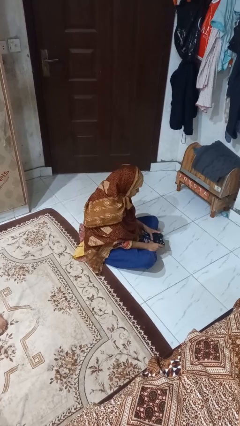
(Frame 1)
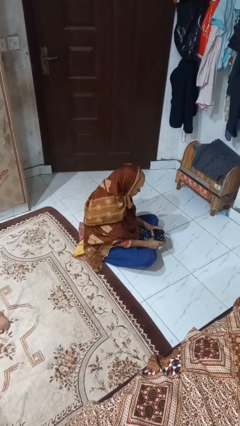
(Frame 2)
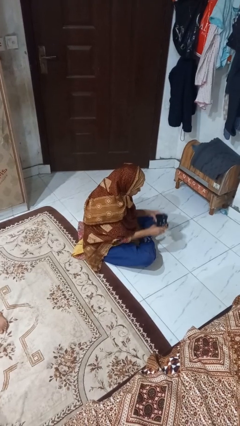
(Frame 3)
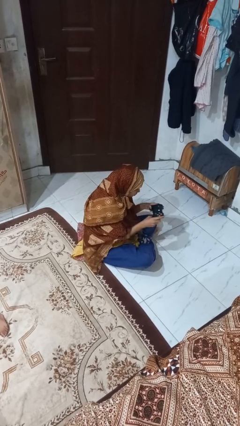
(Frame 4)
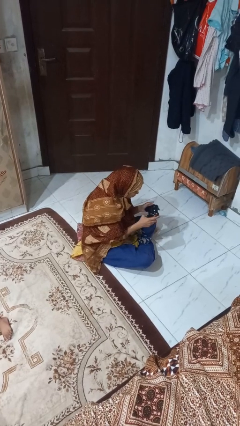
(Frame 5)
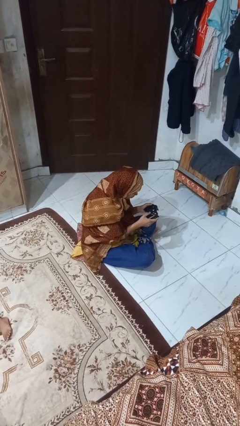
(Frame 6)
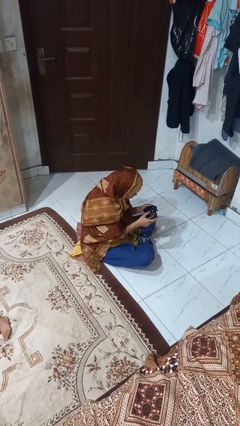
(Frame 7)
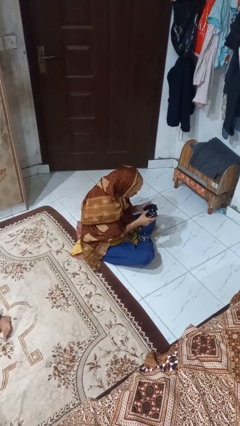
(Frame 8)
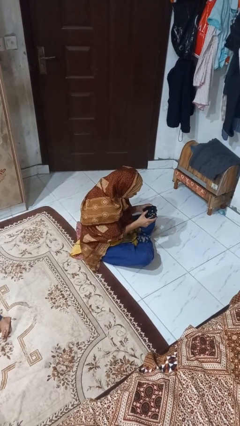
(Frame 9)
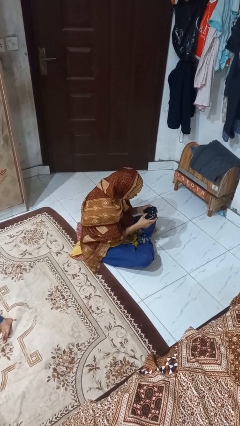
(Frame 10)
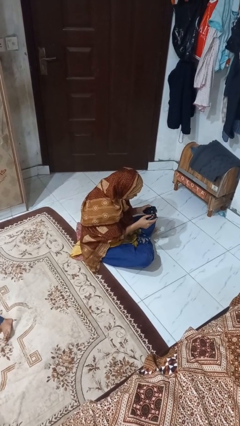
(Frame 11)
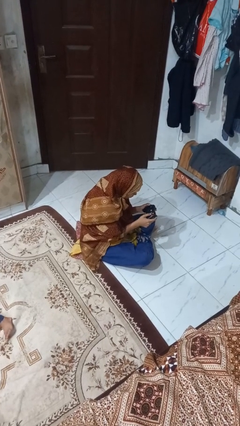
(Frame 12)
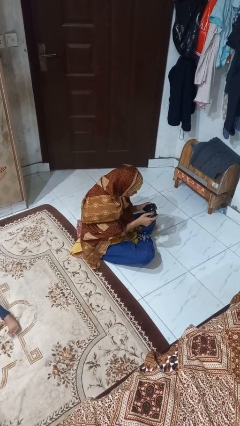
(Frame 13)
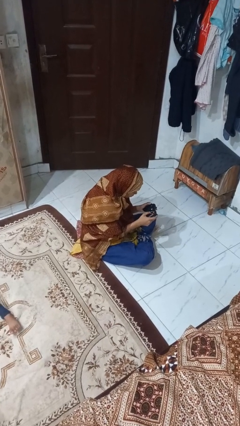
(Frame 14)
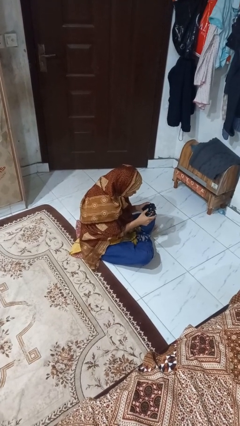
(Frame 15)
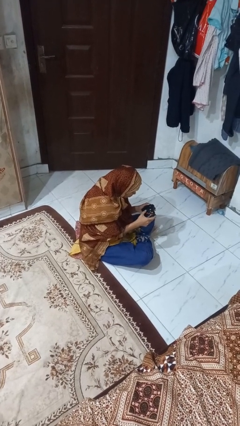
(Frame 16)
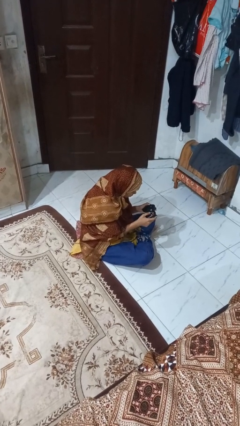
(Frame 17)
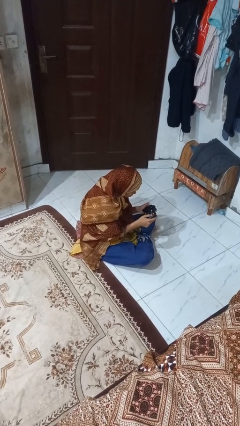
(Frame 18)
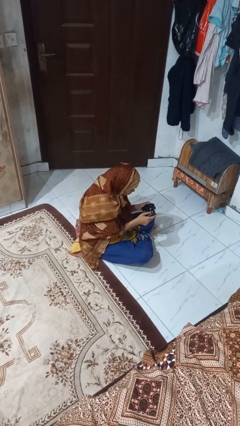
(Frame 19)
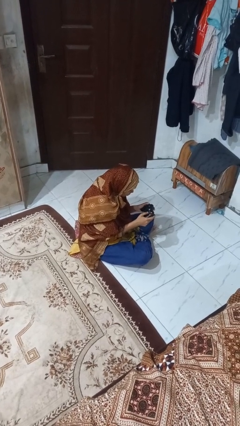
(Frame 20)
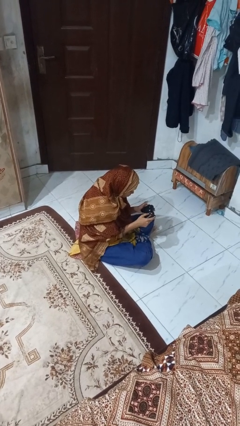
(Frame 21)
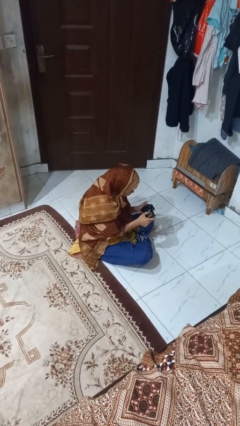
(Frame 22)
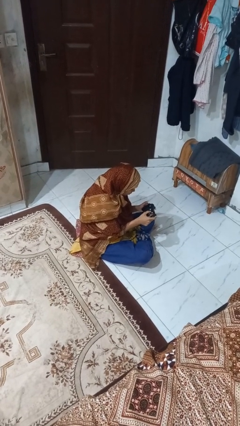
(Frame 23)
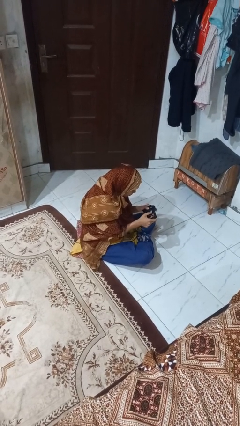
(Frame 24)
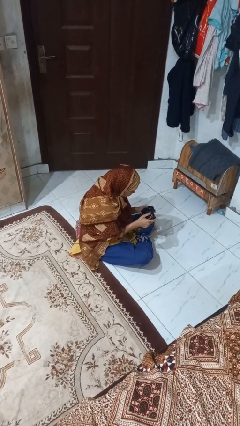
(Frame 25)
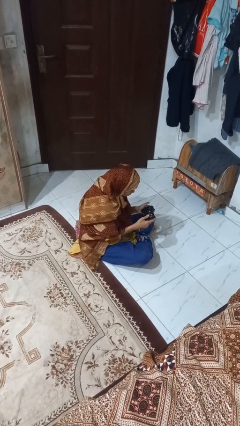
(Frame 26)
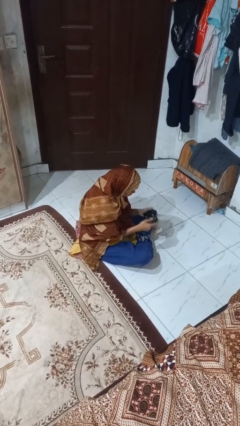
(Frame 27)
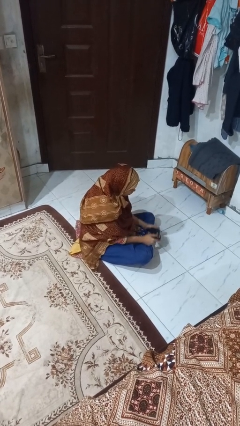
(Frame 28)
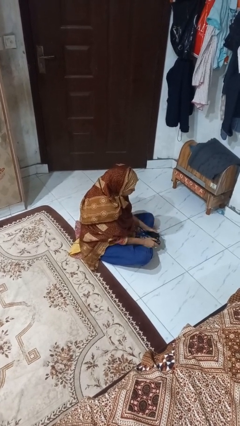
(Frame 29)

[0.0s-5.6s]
person interacts with handheld game

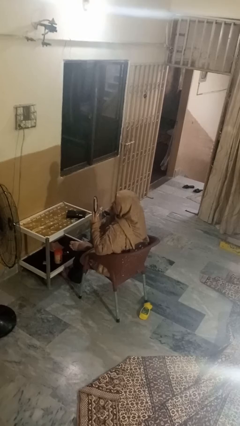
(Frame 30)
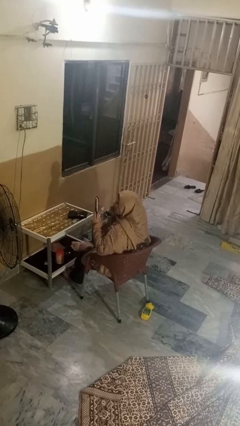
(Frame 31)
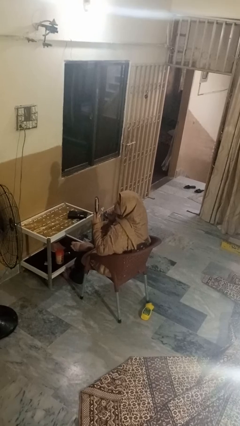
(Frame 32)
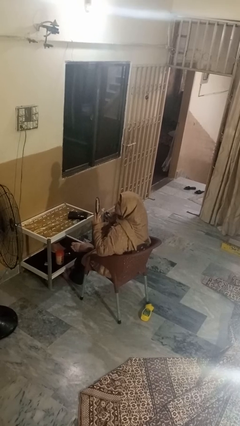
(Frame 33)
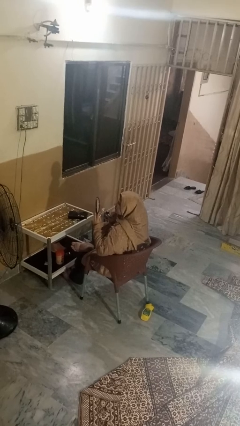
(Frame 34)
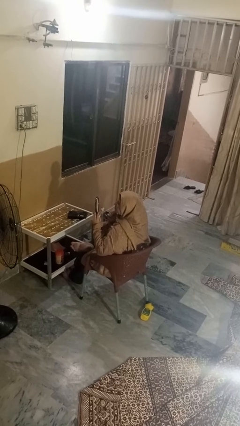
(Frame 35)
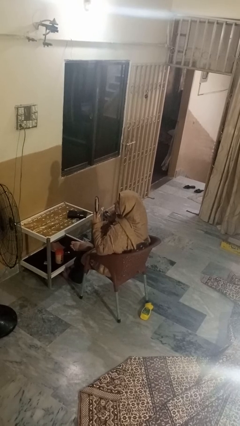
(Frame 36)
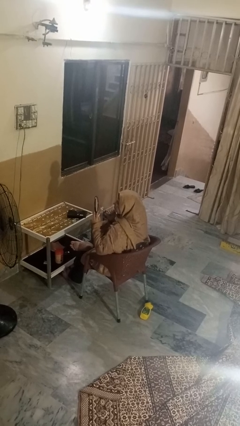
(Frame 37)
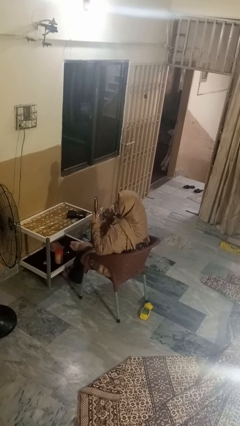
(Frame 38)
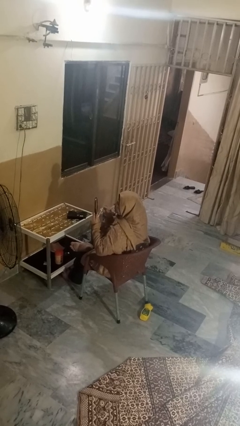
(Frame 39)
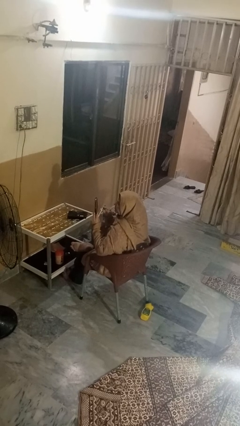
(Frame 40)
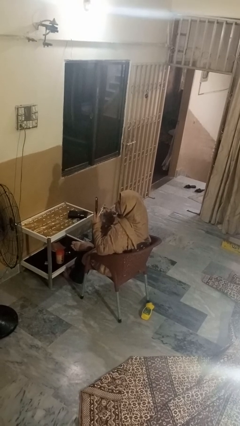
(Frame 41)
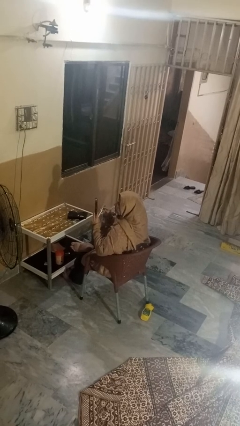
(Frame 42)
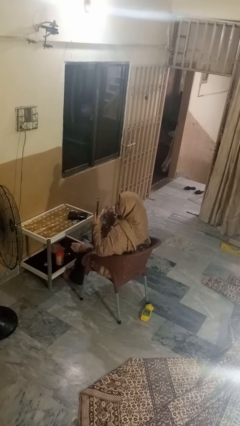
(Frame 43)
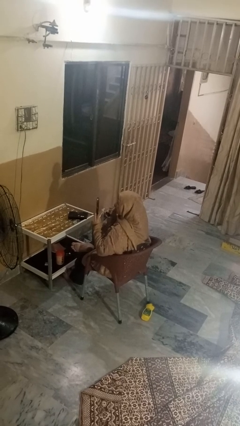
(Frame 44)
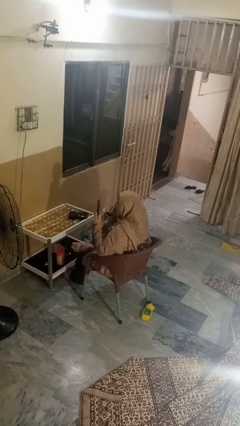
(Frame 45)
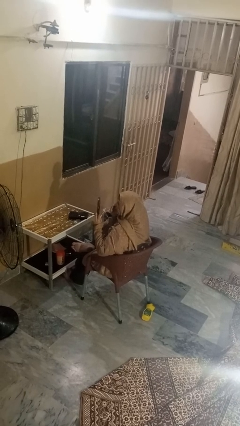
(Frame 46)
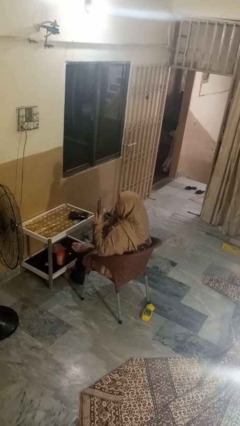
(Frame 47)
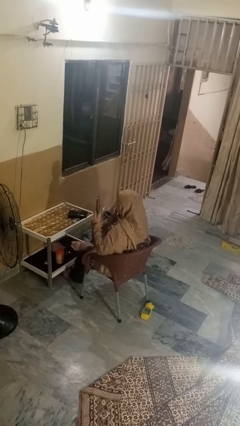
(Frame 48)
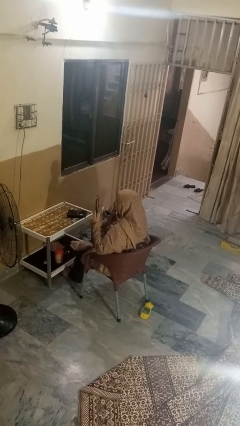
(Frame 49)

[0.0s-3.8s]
person applies foundation makeup

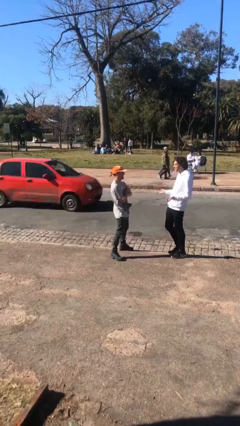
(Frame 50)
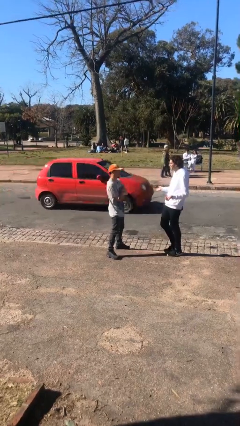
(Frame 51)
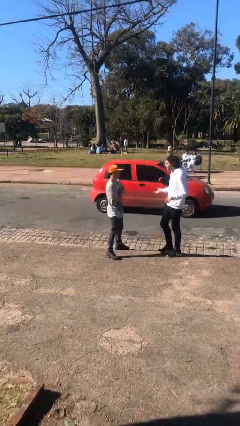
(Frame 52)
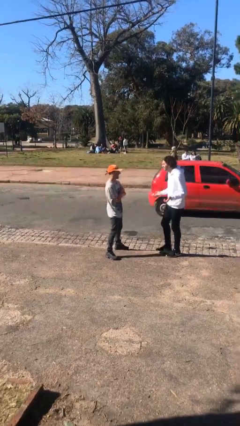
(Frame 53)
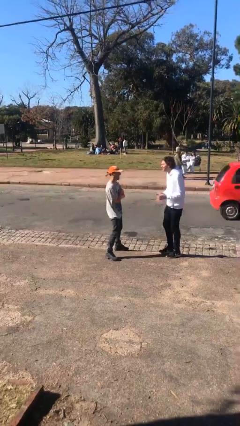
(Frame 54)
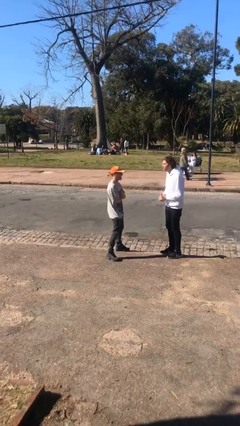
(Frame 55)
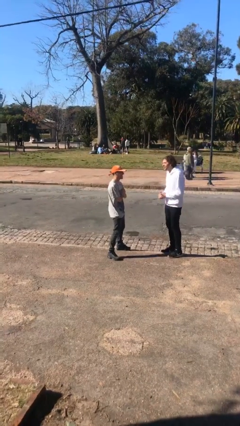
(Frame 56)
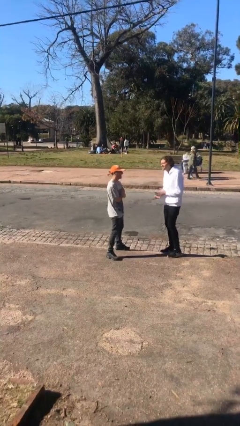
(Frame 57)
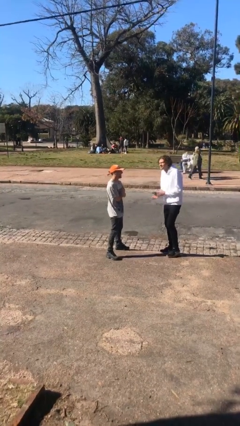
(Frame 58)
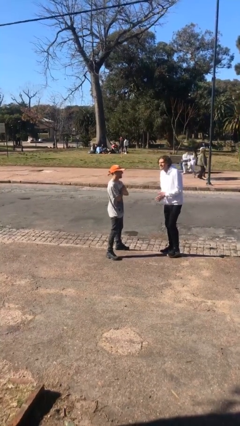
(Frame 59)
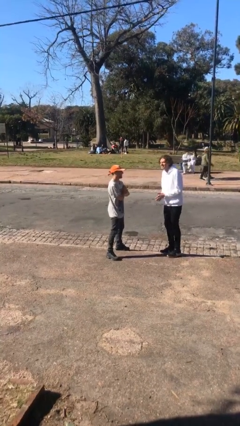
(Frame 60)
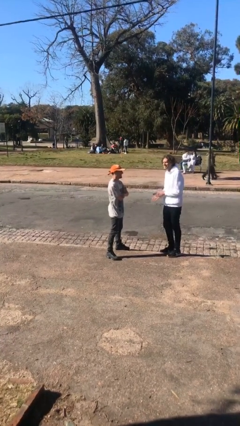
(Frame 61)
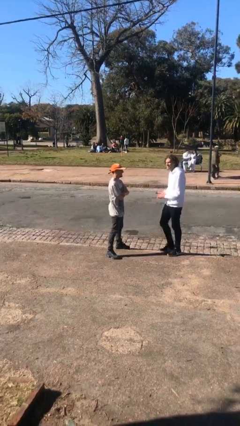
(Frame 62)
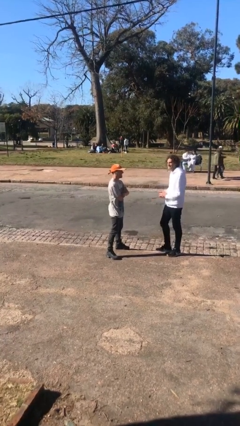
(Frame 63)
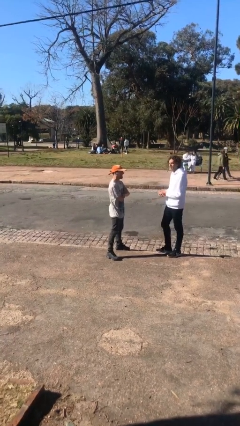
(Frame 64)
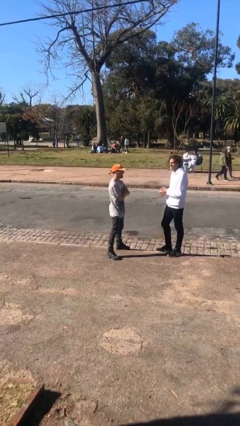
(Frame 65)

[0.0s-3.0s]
person talks to person

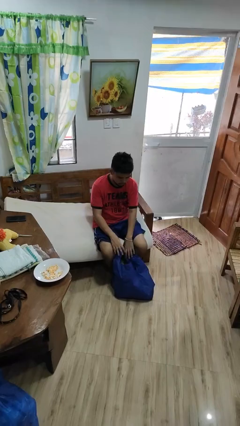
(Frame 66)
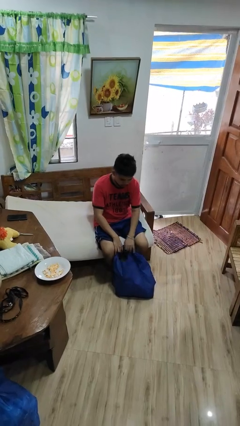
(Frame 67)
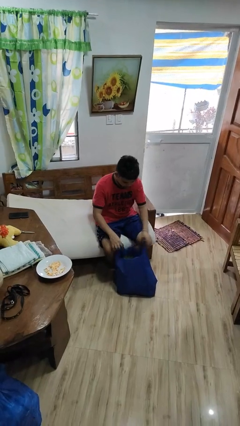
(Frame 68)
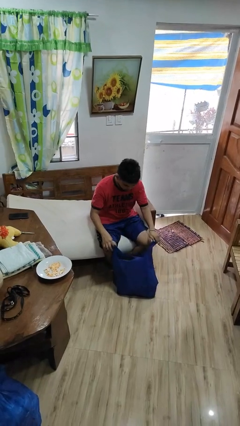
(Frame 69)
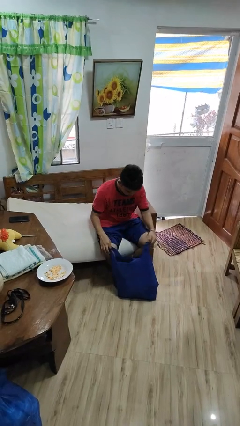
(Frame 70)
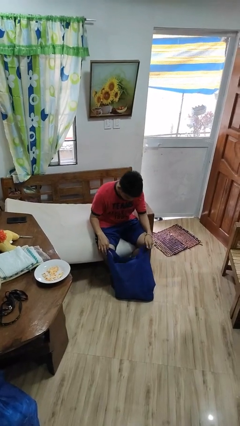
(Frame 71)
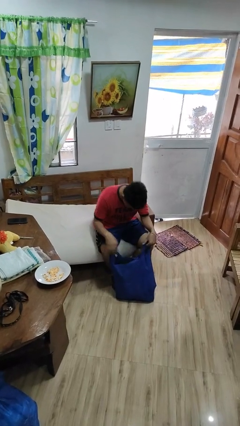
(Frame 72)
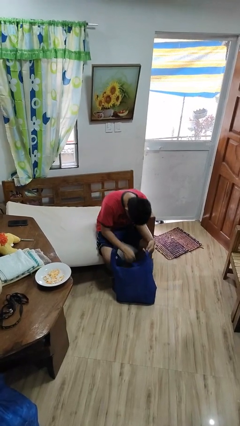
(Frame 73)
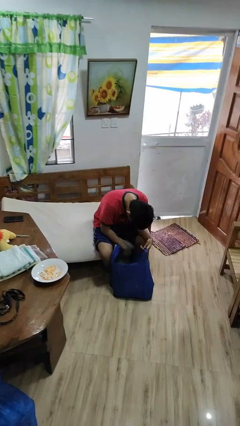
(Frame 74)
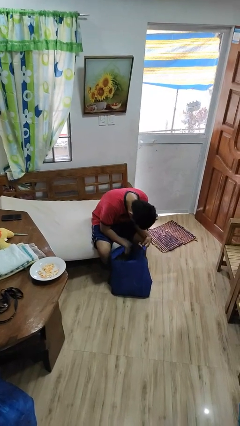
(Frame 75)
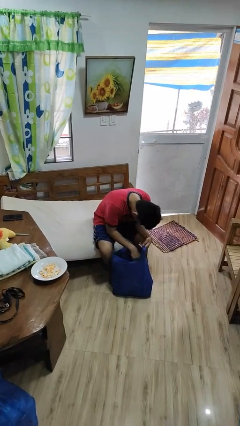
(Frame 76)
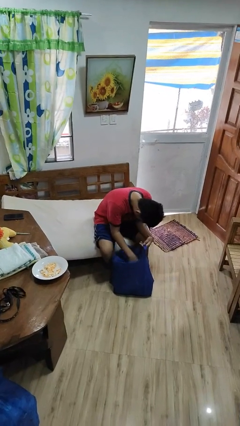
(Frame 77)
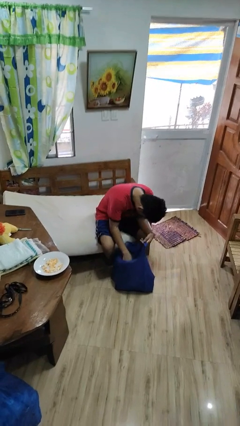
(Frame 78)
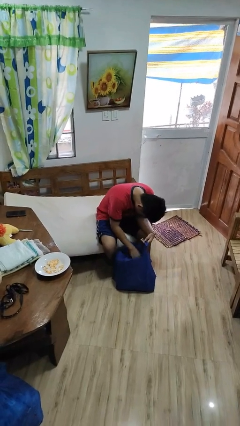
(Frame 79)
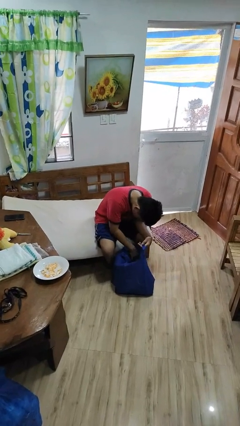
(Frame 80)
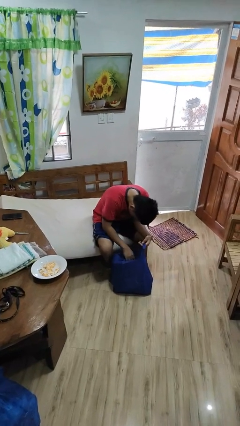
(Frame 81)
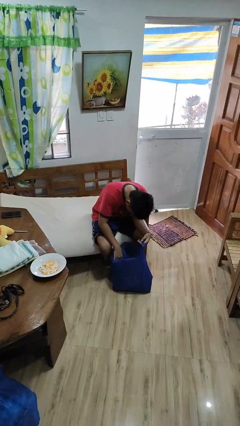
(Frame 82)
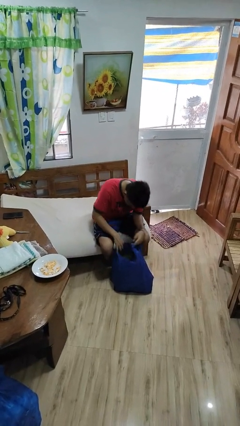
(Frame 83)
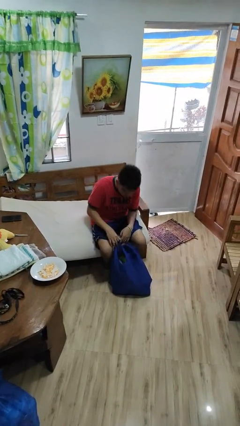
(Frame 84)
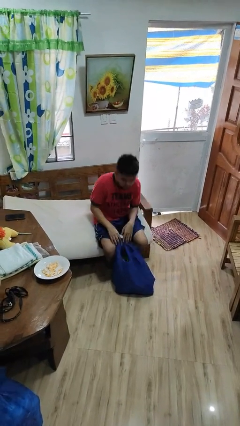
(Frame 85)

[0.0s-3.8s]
person searches in bag

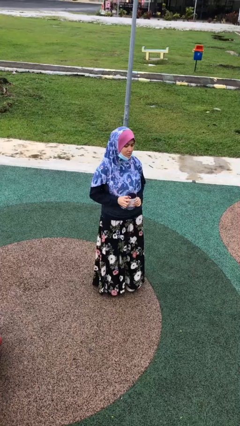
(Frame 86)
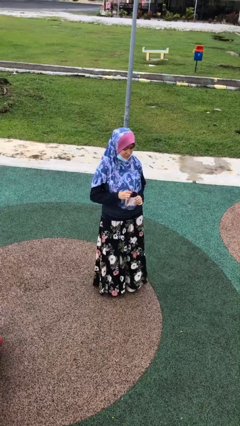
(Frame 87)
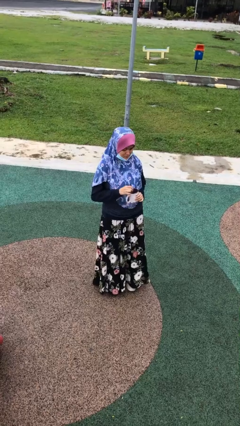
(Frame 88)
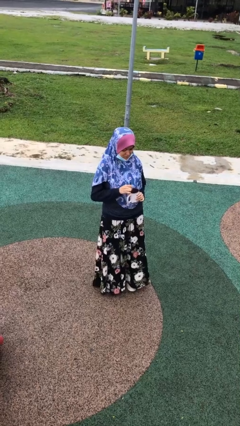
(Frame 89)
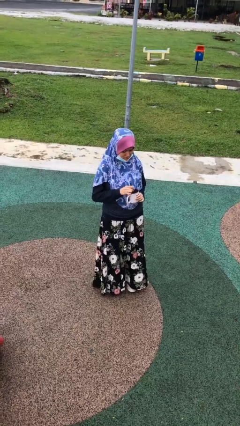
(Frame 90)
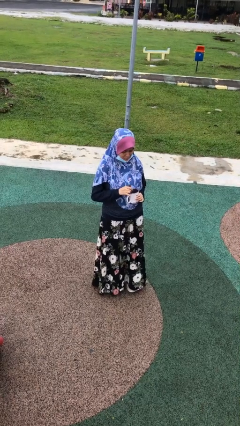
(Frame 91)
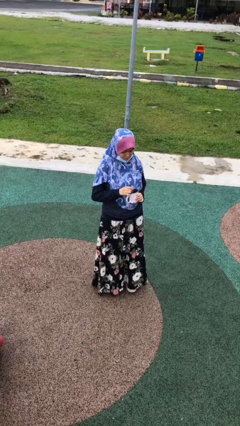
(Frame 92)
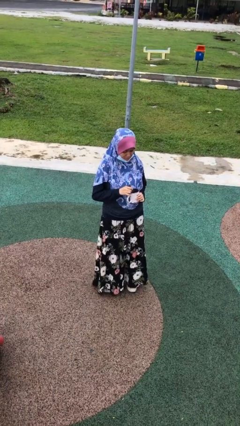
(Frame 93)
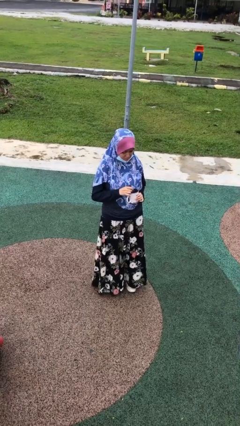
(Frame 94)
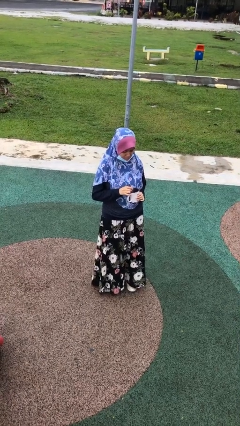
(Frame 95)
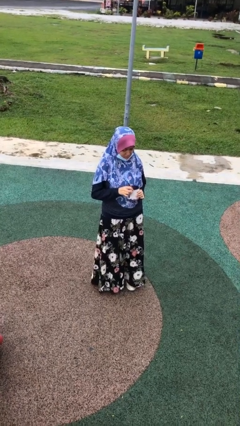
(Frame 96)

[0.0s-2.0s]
person stirs mug
